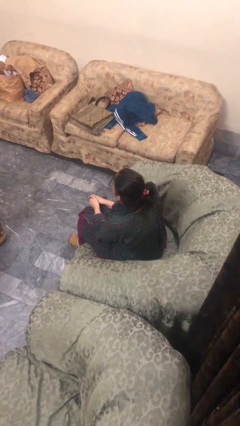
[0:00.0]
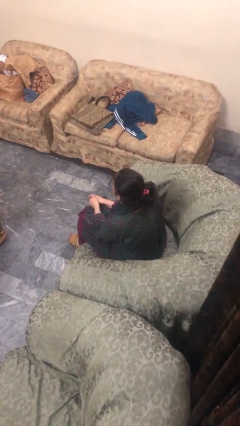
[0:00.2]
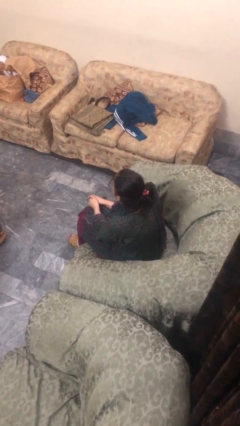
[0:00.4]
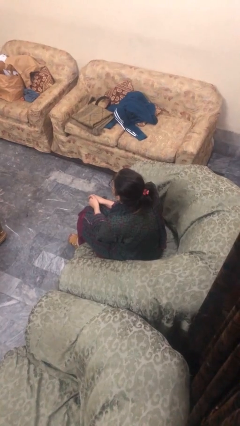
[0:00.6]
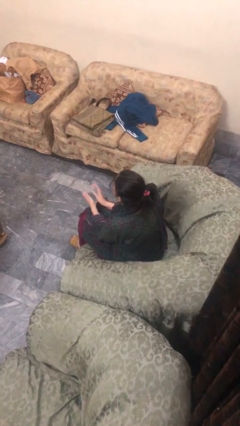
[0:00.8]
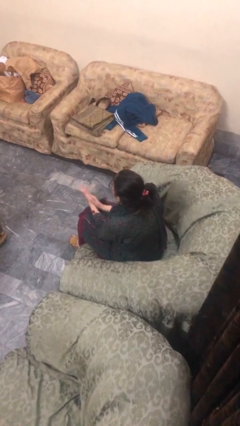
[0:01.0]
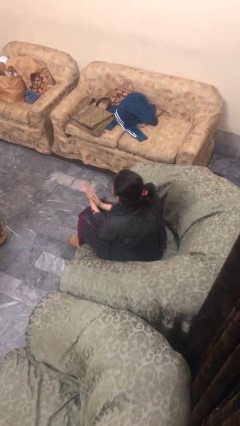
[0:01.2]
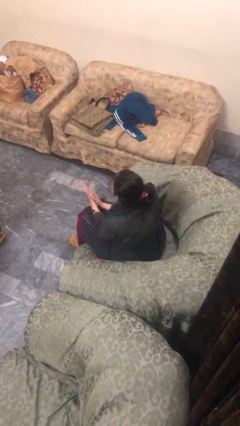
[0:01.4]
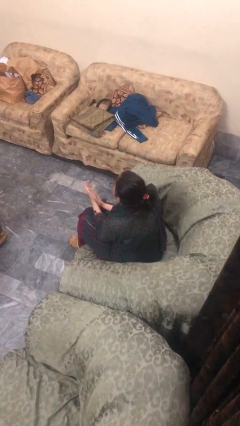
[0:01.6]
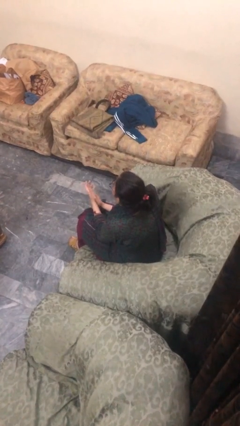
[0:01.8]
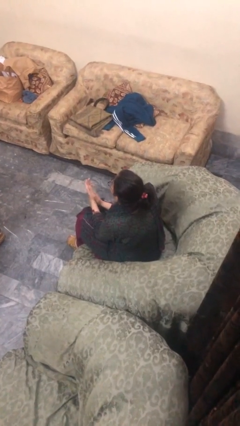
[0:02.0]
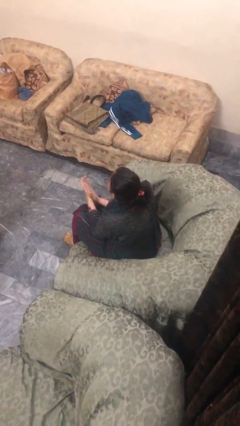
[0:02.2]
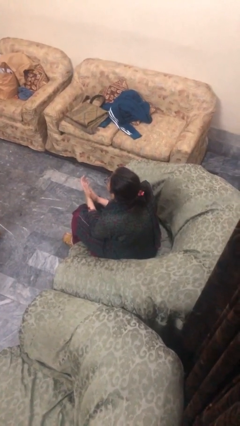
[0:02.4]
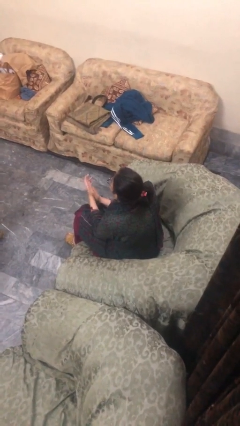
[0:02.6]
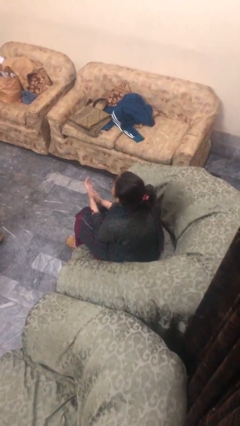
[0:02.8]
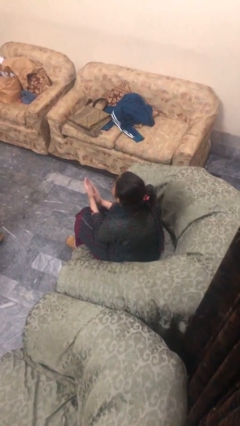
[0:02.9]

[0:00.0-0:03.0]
person claps hands

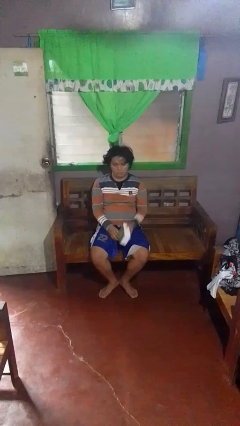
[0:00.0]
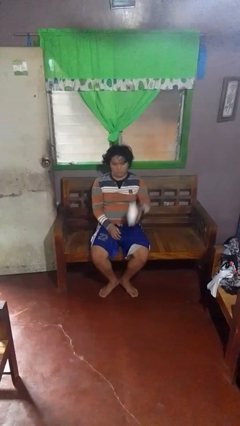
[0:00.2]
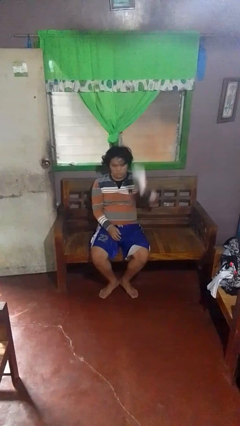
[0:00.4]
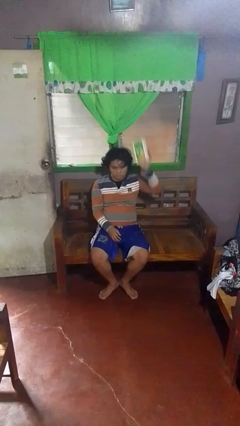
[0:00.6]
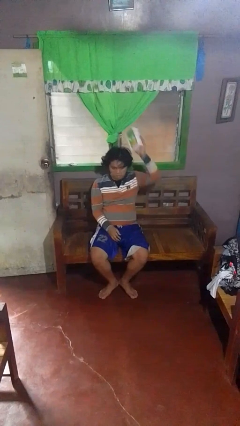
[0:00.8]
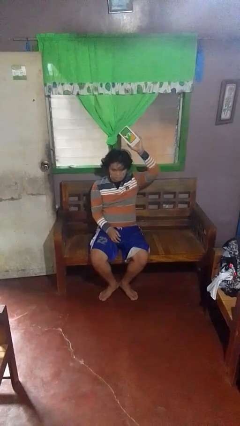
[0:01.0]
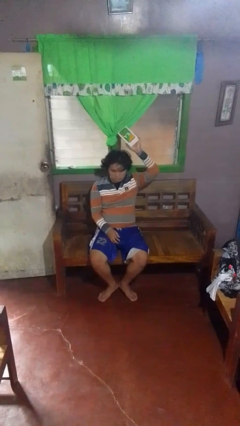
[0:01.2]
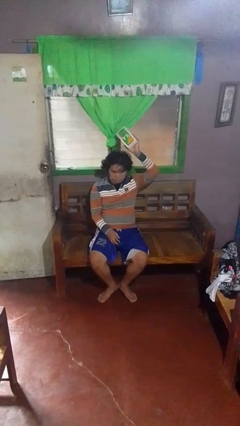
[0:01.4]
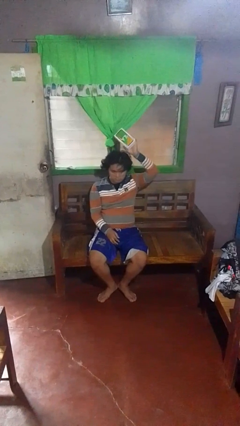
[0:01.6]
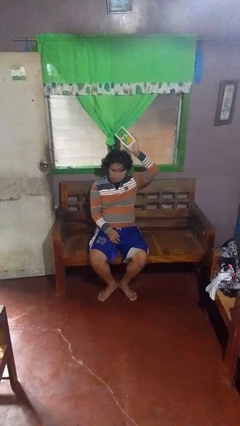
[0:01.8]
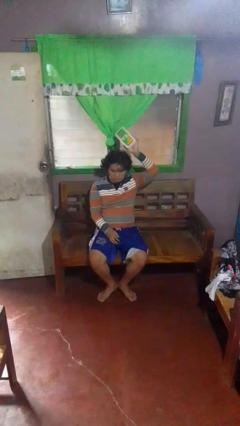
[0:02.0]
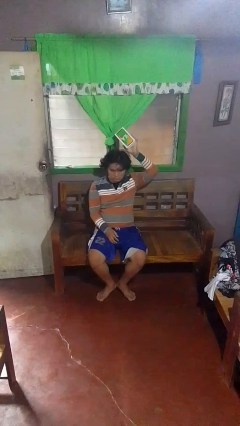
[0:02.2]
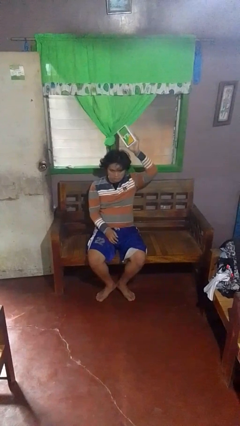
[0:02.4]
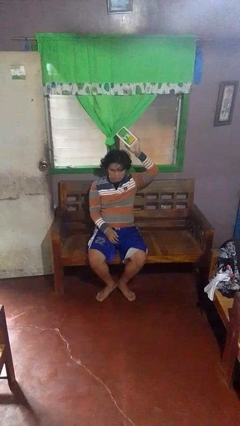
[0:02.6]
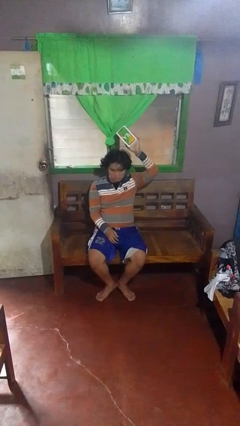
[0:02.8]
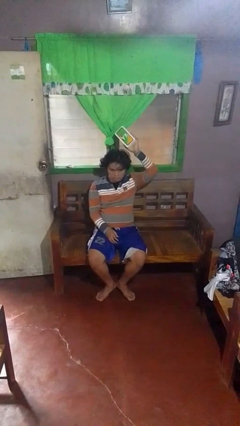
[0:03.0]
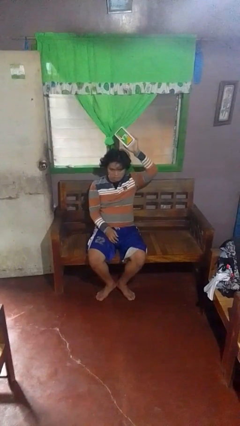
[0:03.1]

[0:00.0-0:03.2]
person holds object above head

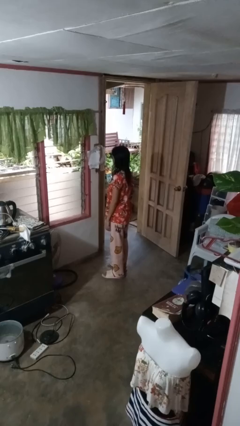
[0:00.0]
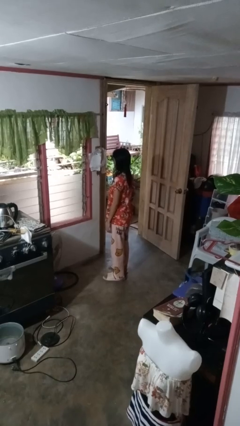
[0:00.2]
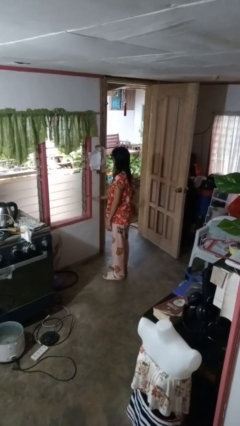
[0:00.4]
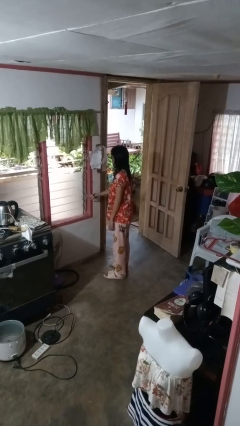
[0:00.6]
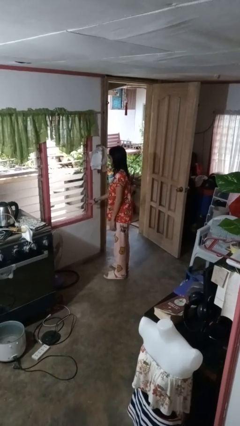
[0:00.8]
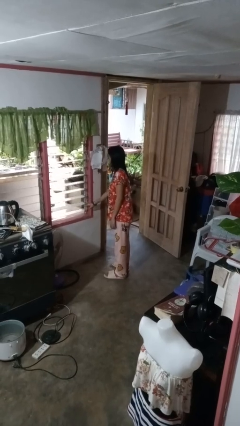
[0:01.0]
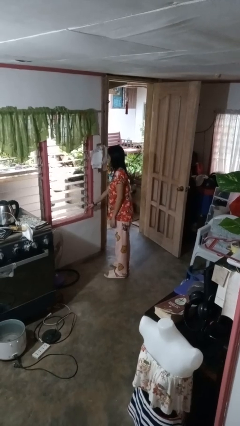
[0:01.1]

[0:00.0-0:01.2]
person opens home window

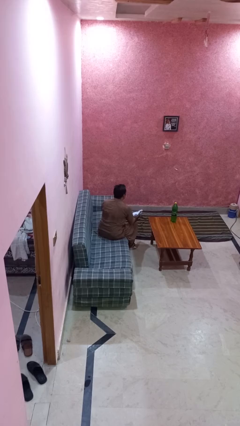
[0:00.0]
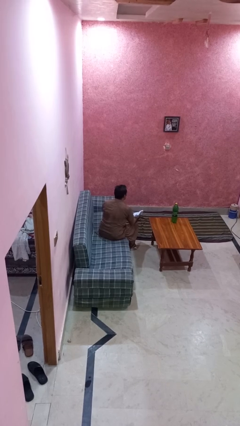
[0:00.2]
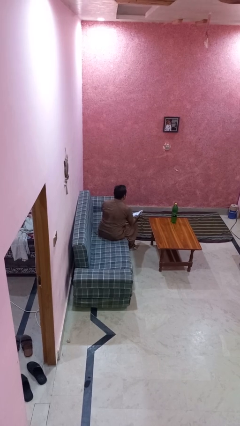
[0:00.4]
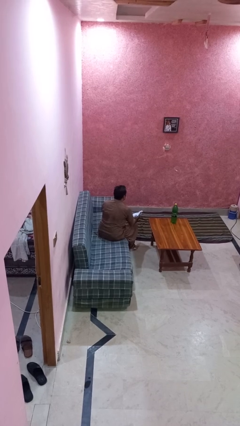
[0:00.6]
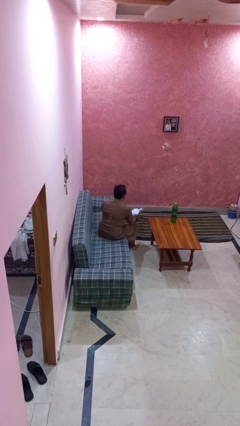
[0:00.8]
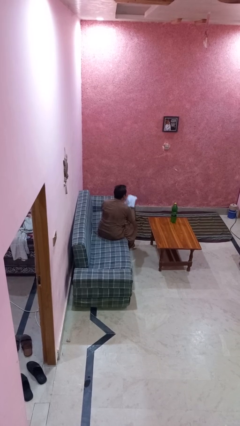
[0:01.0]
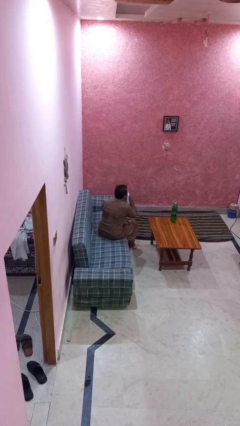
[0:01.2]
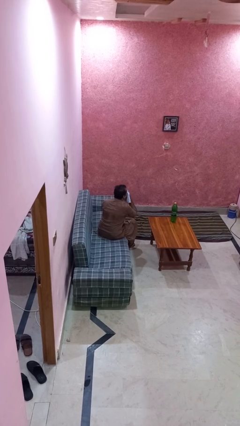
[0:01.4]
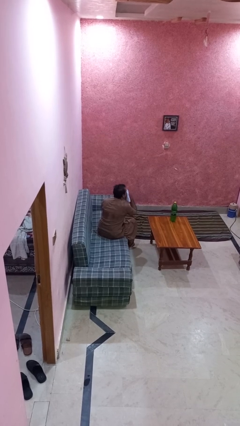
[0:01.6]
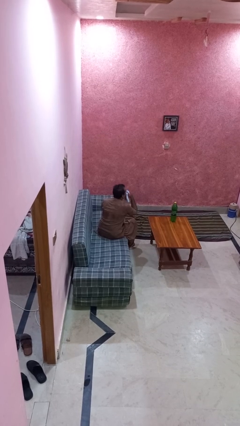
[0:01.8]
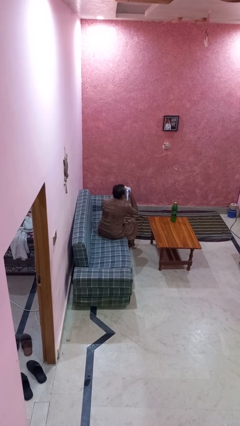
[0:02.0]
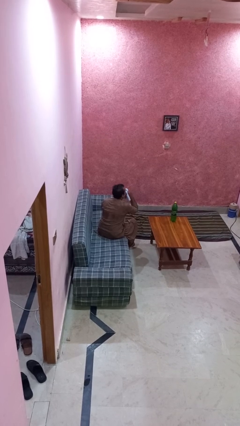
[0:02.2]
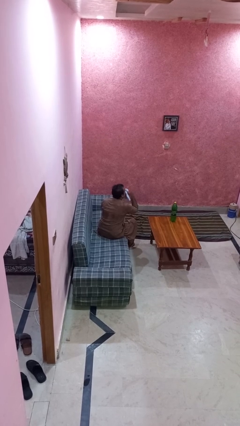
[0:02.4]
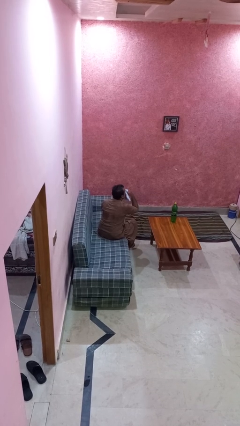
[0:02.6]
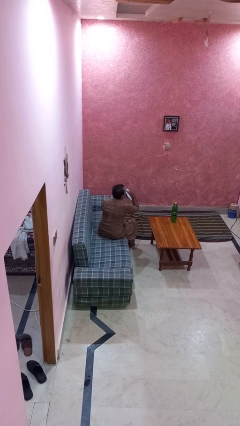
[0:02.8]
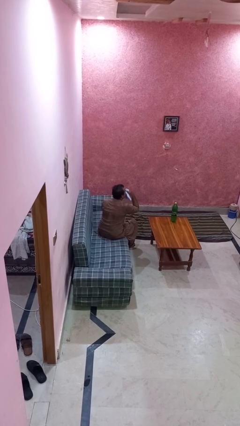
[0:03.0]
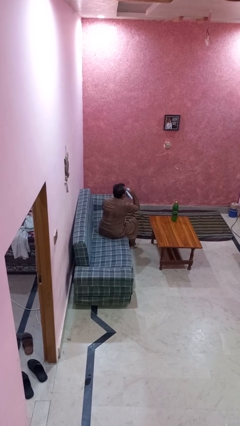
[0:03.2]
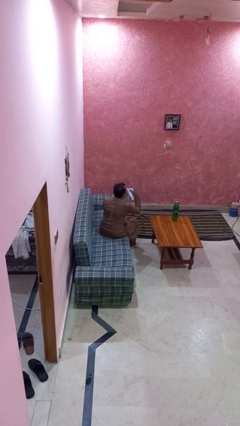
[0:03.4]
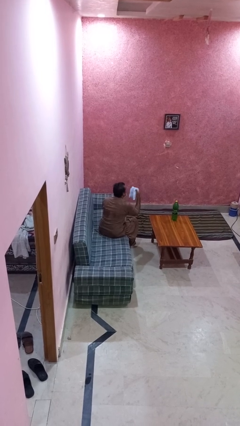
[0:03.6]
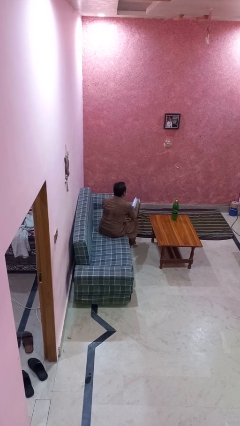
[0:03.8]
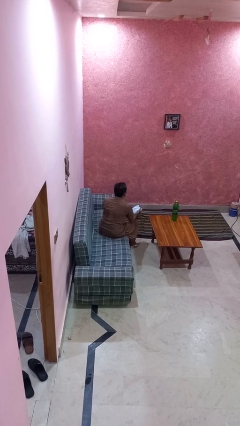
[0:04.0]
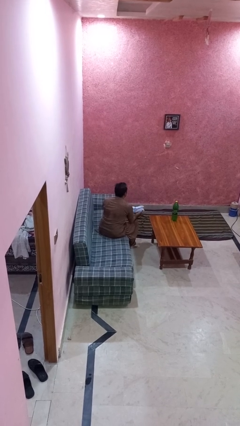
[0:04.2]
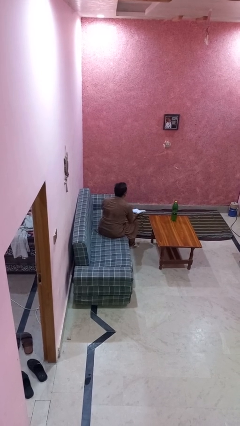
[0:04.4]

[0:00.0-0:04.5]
person blows nose

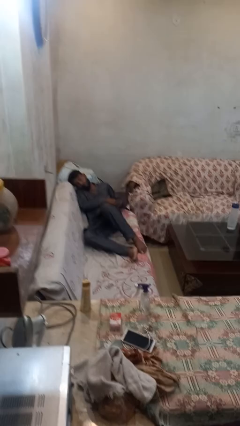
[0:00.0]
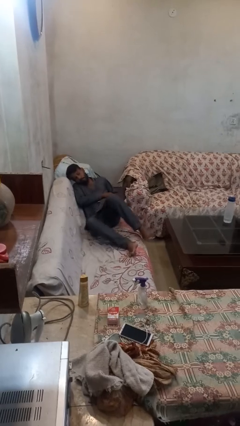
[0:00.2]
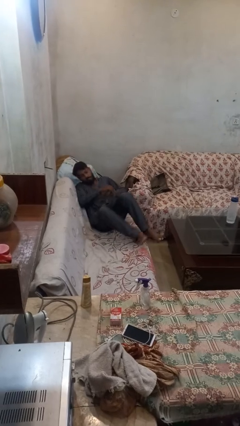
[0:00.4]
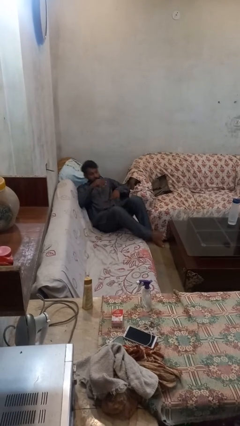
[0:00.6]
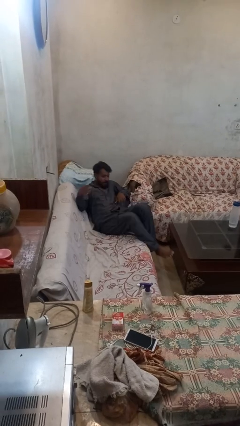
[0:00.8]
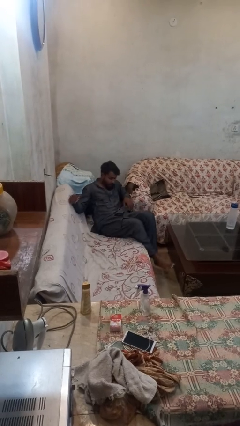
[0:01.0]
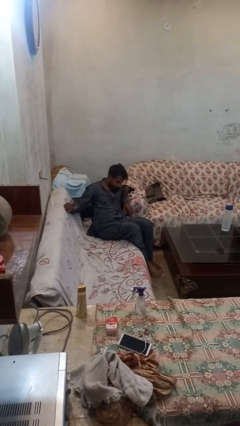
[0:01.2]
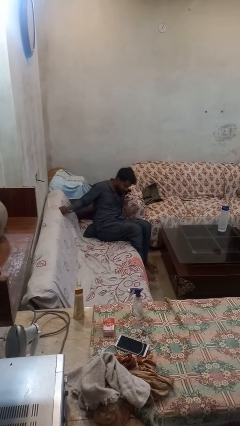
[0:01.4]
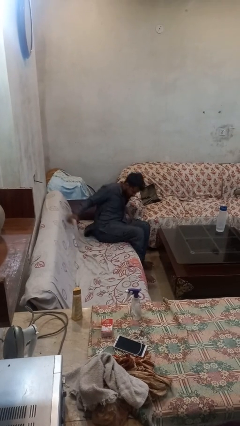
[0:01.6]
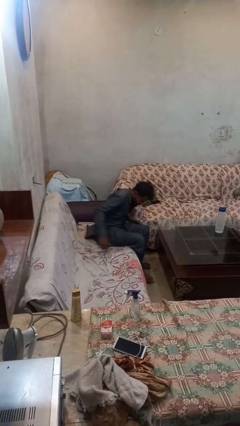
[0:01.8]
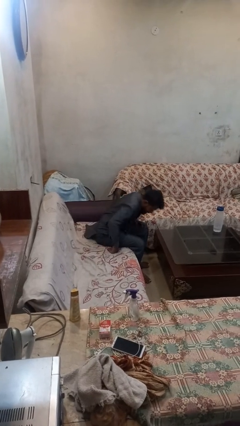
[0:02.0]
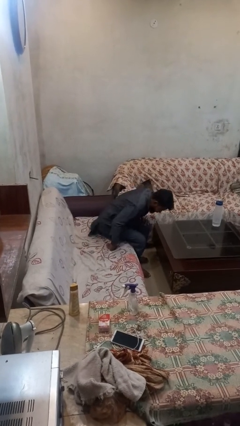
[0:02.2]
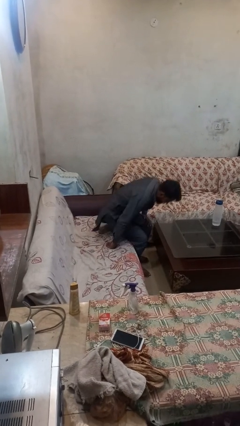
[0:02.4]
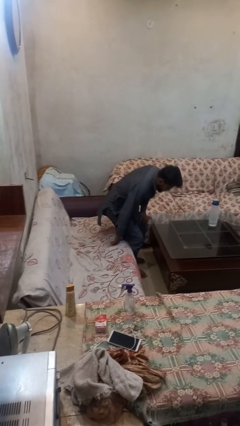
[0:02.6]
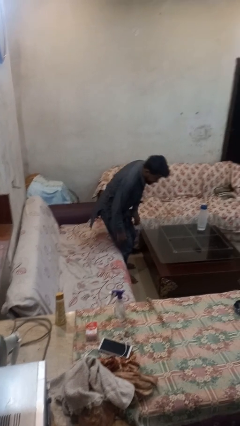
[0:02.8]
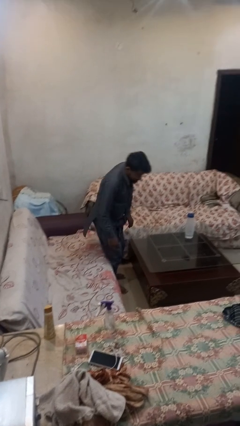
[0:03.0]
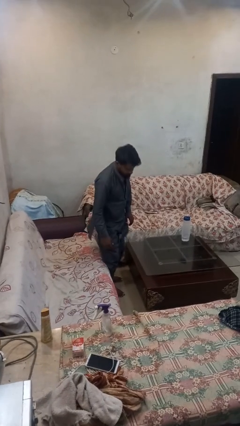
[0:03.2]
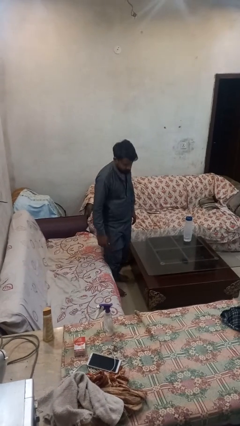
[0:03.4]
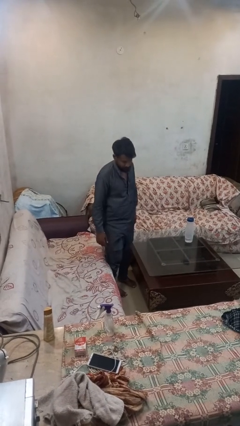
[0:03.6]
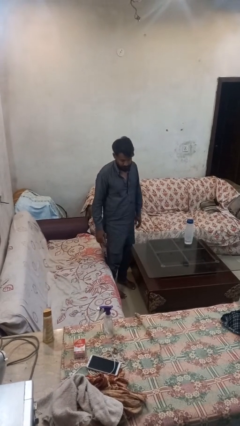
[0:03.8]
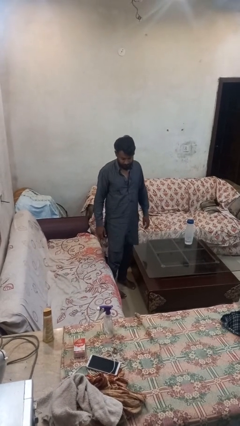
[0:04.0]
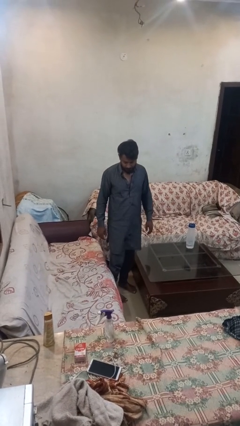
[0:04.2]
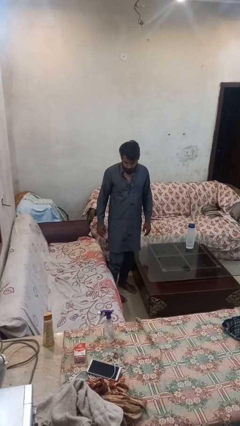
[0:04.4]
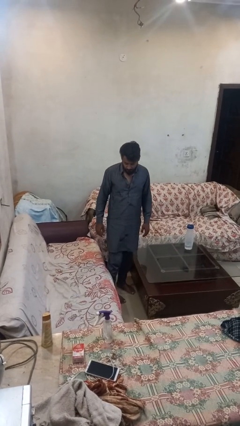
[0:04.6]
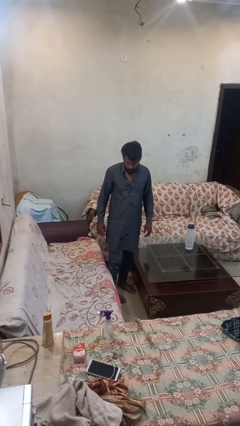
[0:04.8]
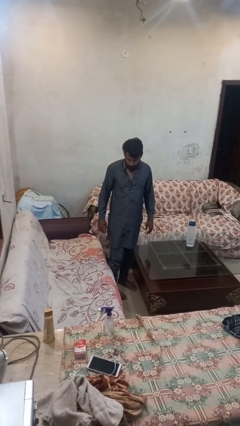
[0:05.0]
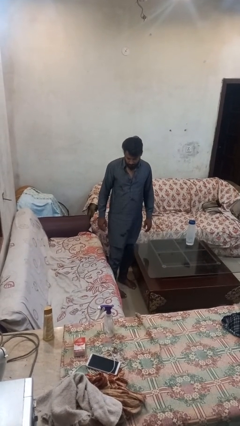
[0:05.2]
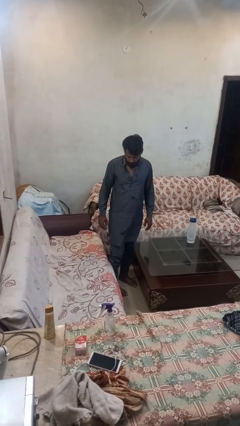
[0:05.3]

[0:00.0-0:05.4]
person stands up
